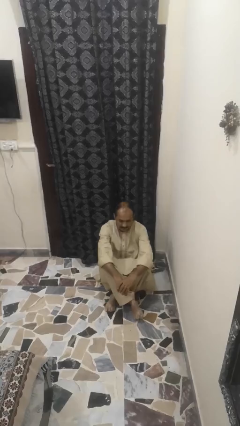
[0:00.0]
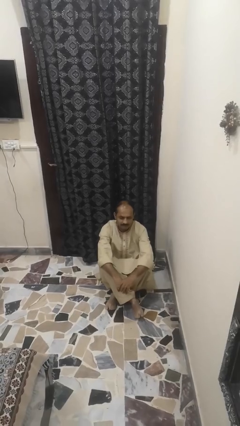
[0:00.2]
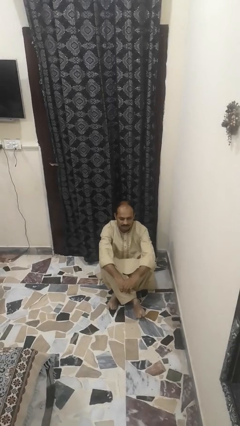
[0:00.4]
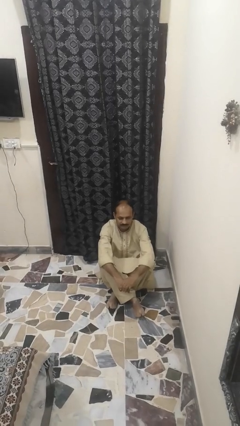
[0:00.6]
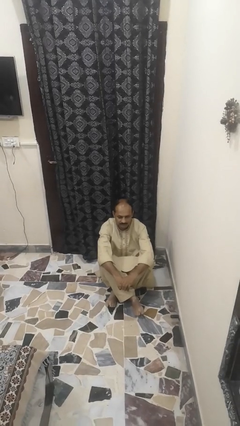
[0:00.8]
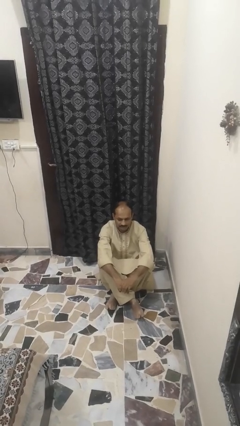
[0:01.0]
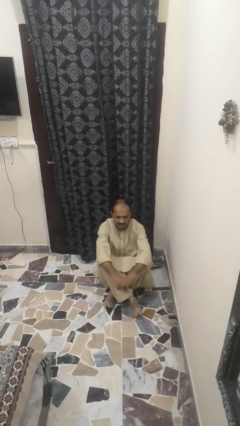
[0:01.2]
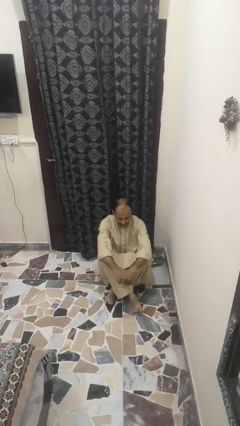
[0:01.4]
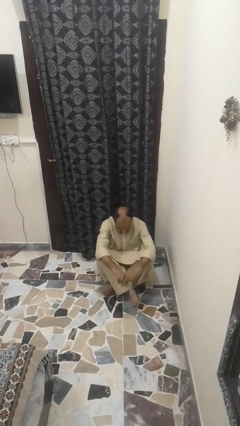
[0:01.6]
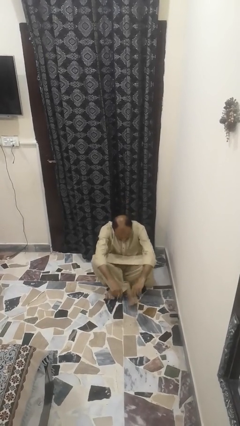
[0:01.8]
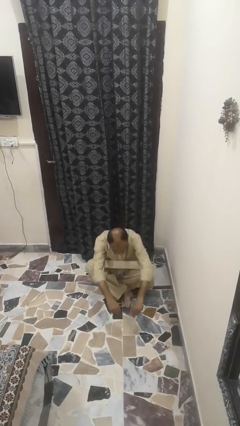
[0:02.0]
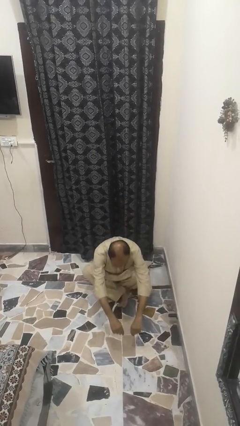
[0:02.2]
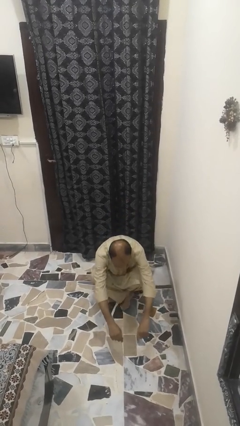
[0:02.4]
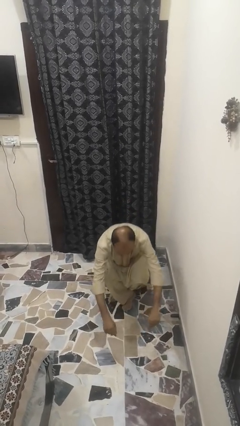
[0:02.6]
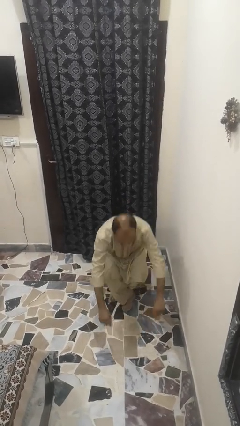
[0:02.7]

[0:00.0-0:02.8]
person reads newspaper

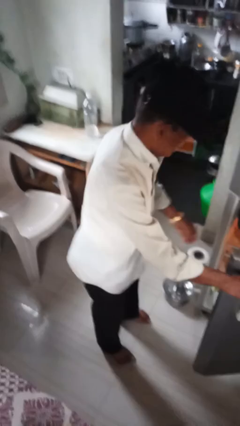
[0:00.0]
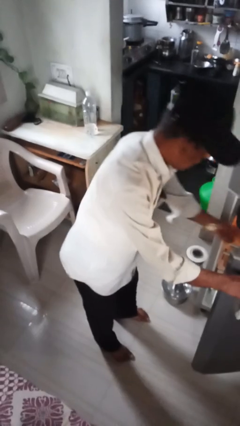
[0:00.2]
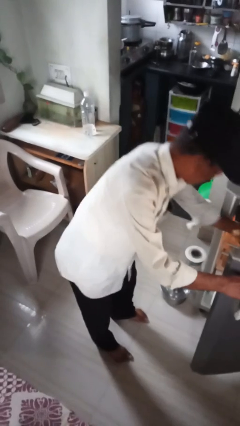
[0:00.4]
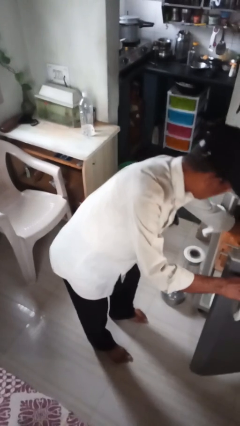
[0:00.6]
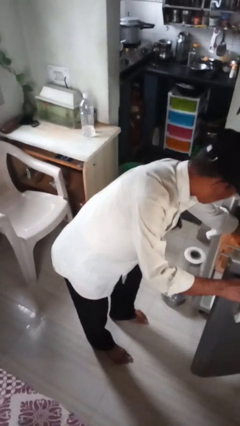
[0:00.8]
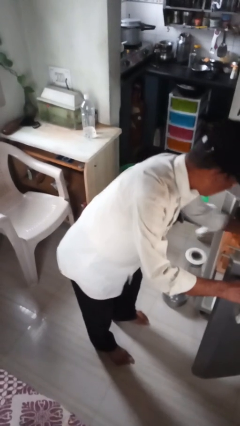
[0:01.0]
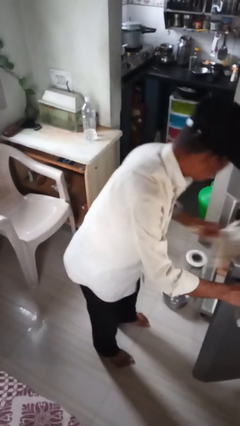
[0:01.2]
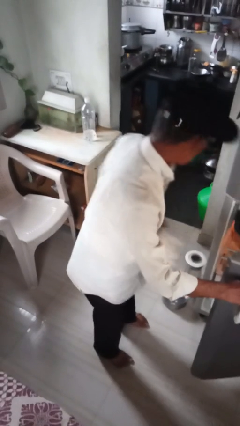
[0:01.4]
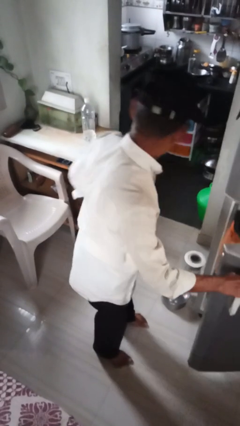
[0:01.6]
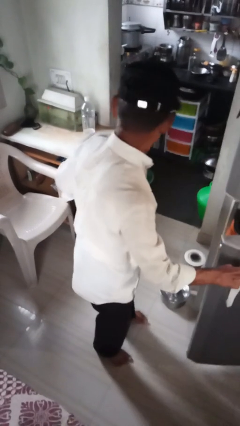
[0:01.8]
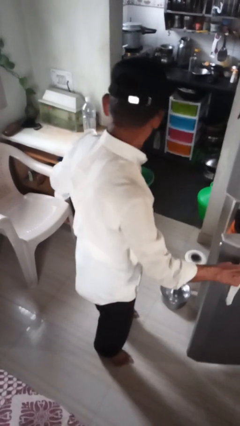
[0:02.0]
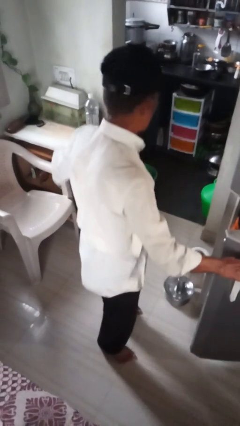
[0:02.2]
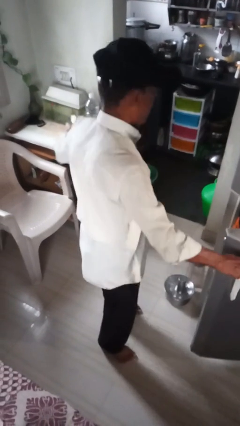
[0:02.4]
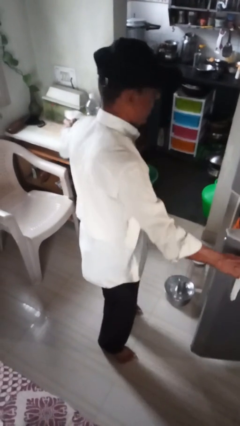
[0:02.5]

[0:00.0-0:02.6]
person unloads clotheswasher

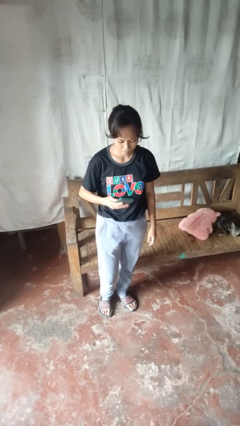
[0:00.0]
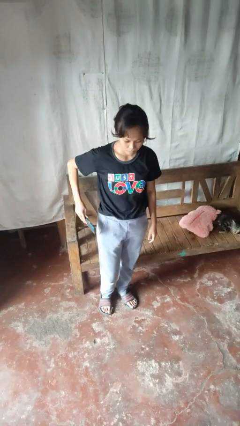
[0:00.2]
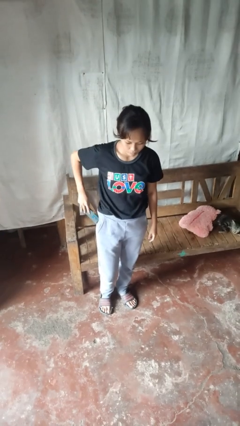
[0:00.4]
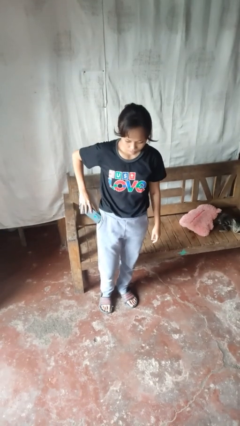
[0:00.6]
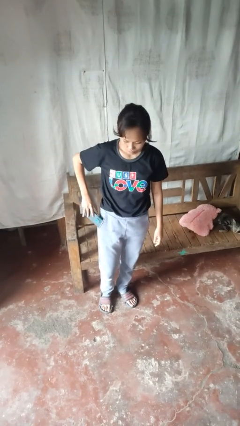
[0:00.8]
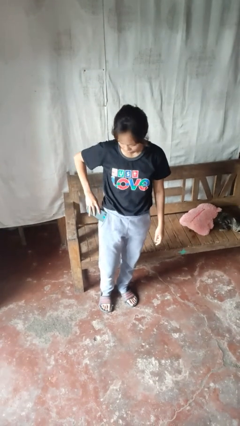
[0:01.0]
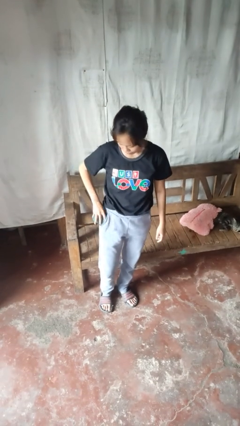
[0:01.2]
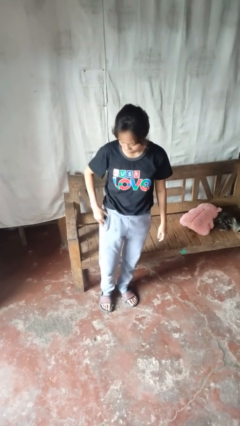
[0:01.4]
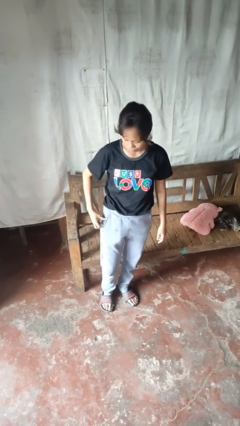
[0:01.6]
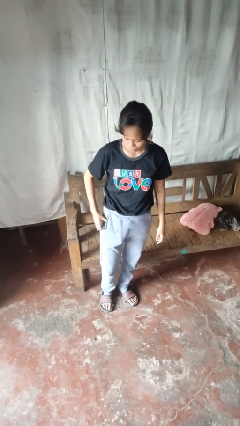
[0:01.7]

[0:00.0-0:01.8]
person puts phone into pocket

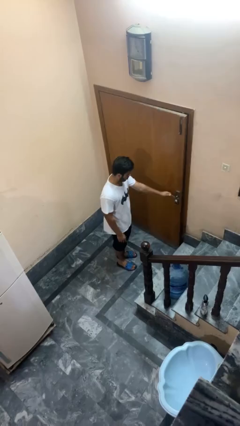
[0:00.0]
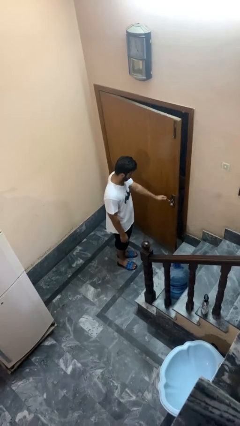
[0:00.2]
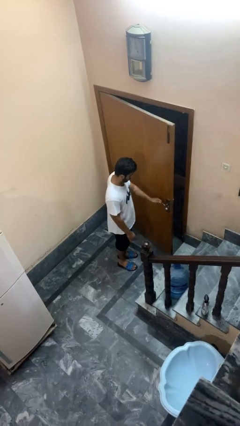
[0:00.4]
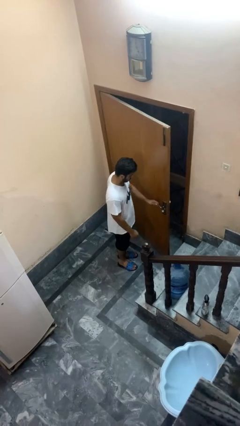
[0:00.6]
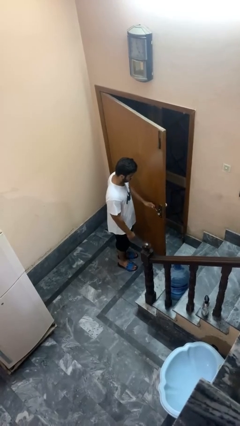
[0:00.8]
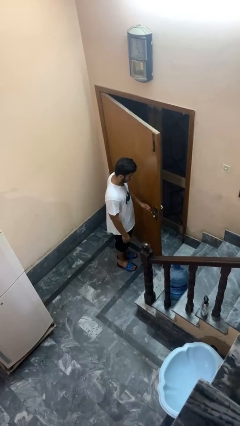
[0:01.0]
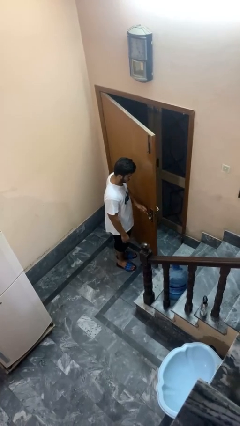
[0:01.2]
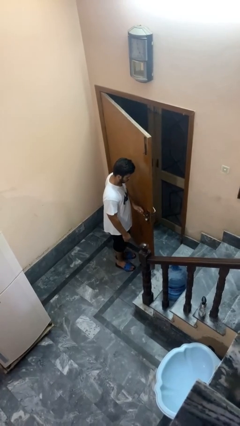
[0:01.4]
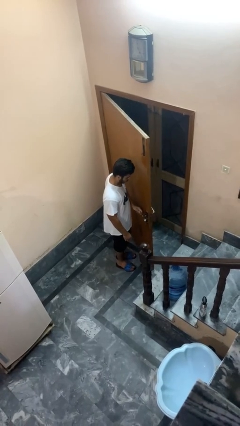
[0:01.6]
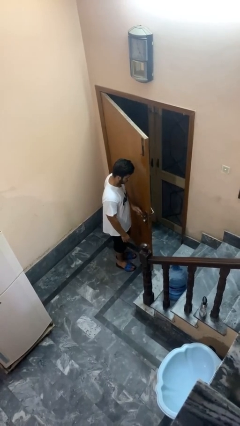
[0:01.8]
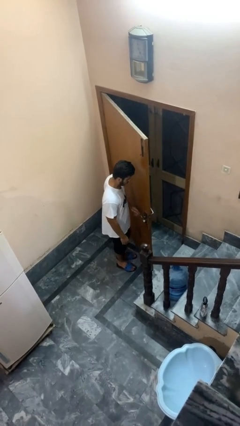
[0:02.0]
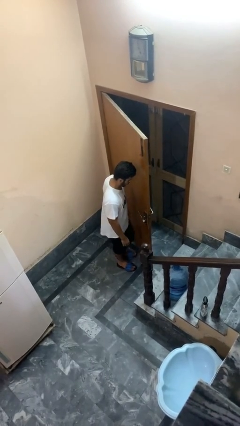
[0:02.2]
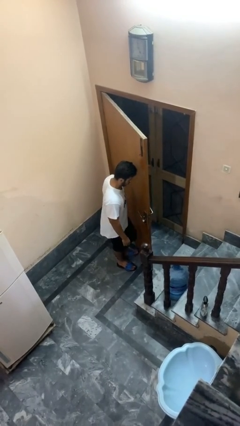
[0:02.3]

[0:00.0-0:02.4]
person opens facility door

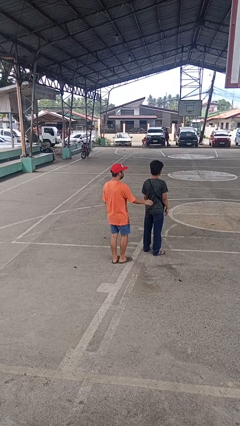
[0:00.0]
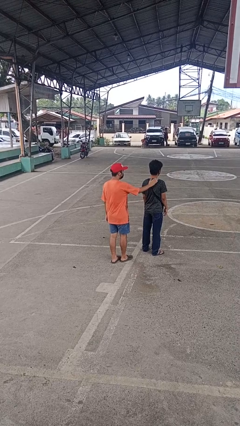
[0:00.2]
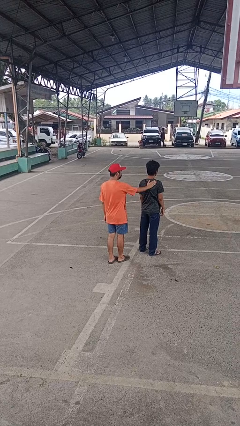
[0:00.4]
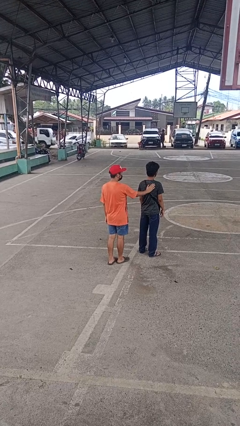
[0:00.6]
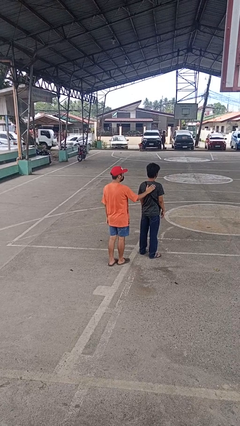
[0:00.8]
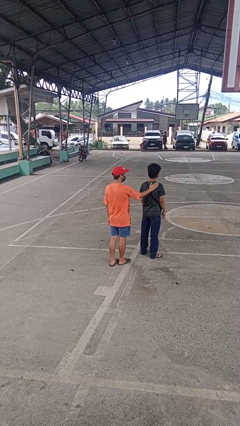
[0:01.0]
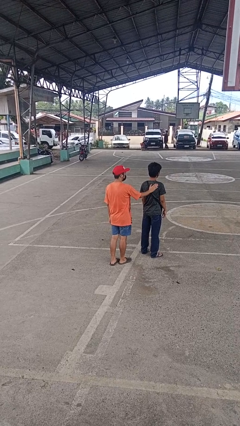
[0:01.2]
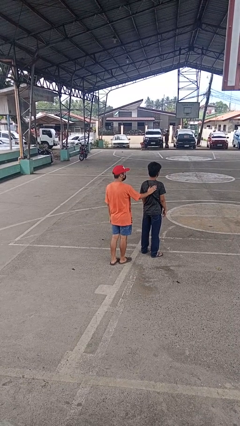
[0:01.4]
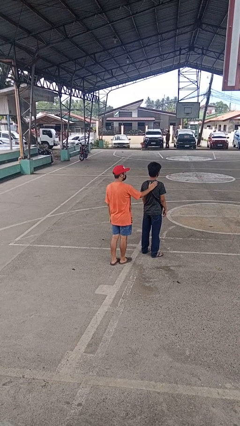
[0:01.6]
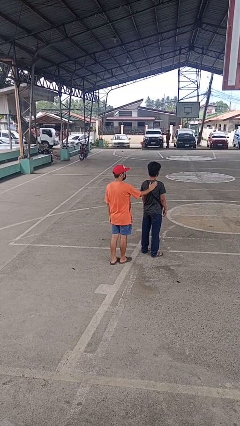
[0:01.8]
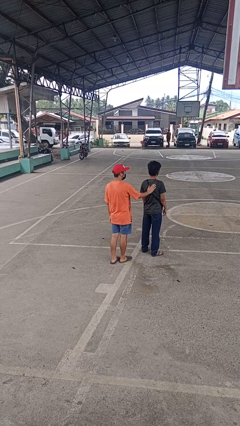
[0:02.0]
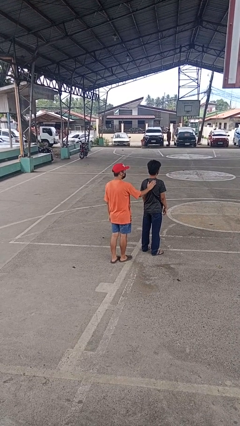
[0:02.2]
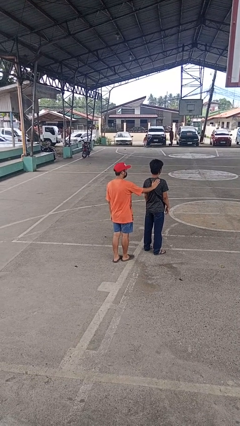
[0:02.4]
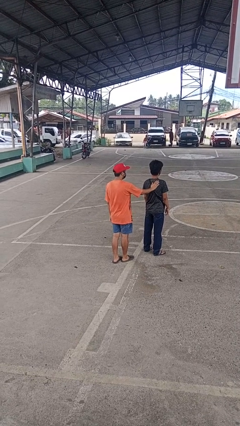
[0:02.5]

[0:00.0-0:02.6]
person touches back of person

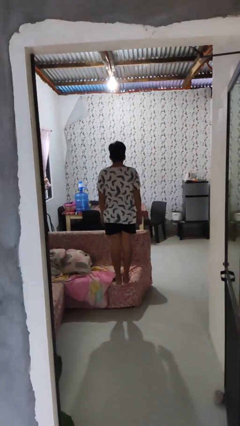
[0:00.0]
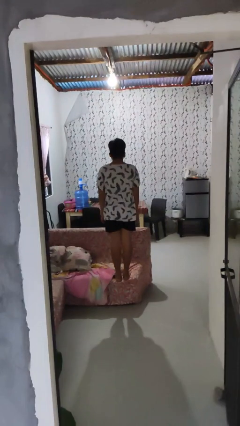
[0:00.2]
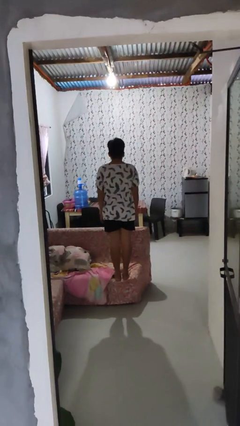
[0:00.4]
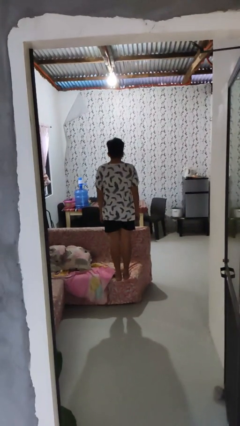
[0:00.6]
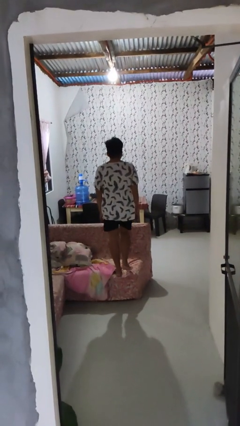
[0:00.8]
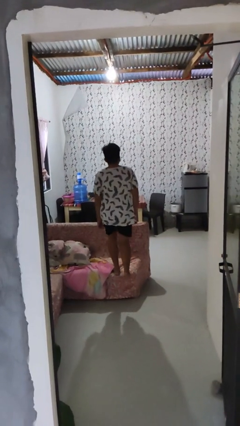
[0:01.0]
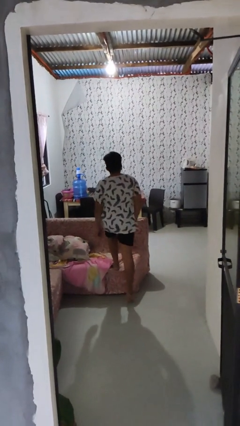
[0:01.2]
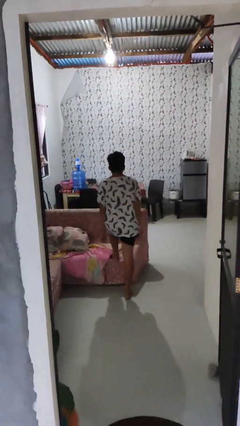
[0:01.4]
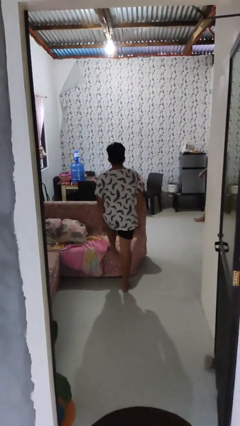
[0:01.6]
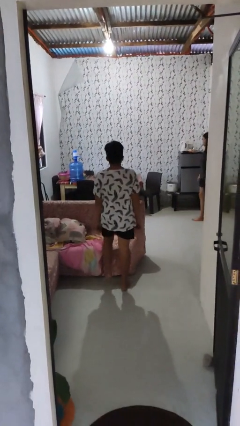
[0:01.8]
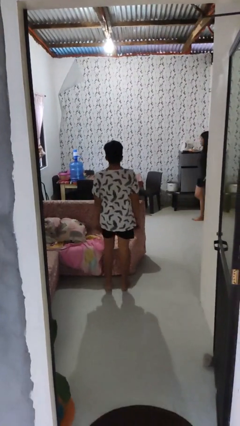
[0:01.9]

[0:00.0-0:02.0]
person climbs off couch

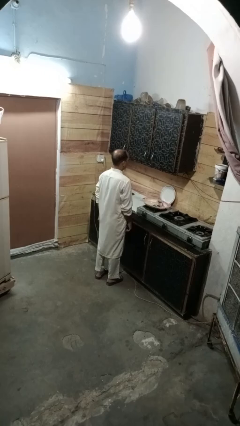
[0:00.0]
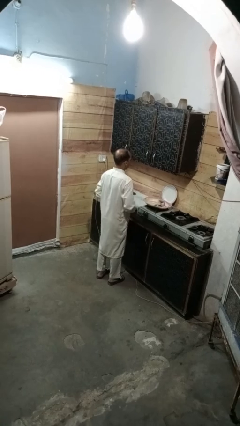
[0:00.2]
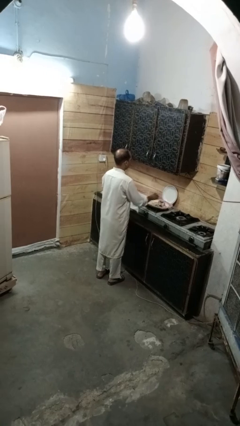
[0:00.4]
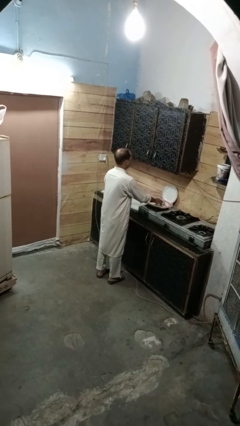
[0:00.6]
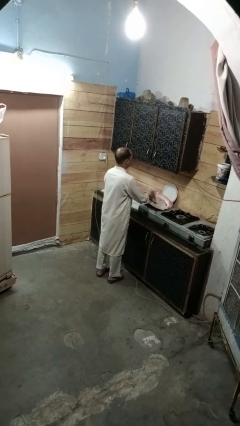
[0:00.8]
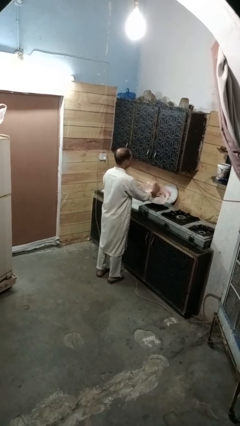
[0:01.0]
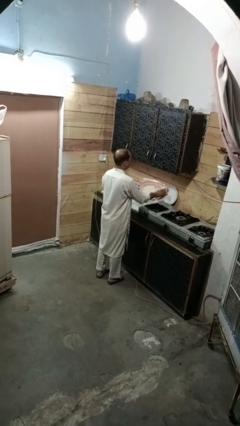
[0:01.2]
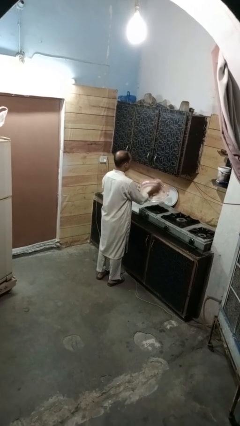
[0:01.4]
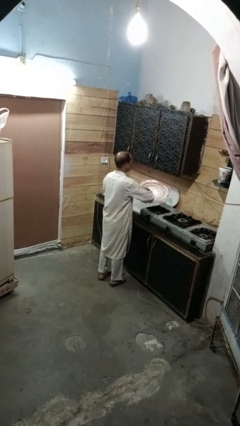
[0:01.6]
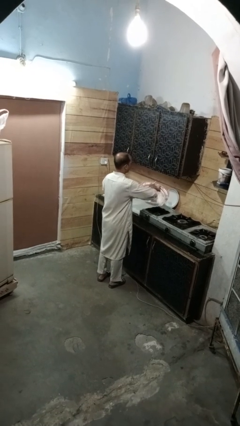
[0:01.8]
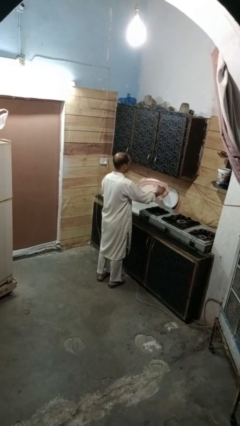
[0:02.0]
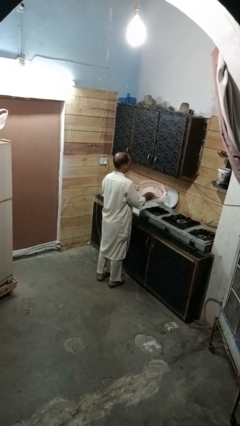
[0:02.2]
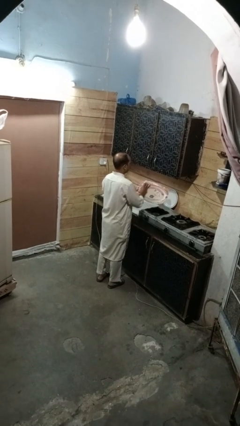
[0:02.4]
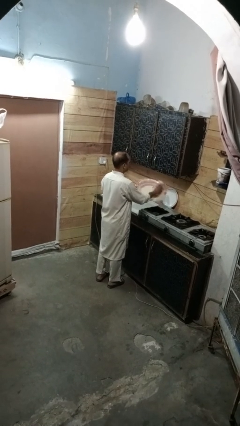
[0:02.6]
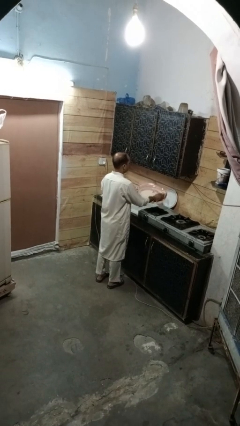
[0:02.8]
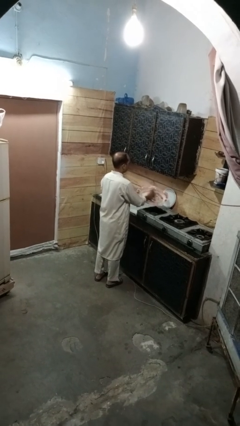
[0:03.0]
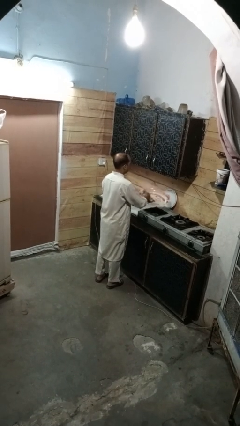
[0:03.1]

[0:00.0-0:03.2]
person dries dish
